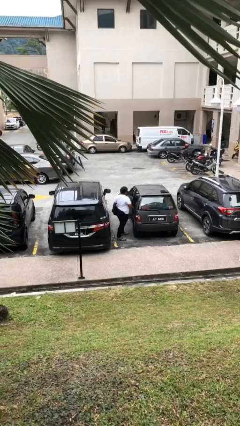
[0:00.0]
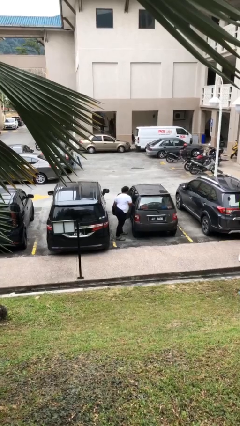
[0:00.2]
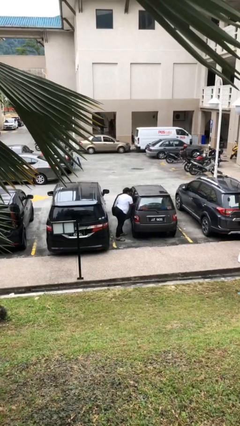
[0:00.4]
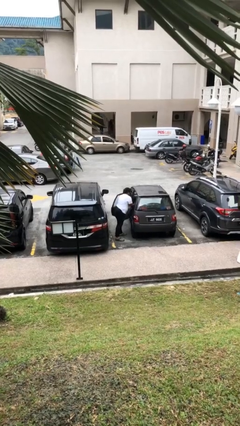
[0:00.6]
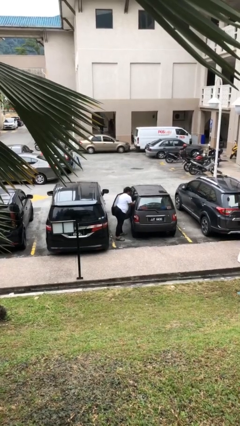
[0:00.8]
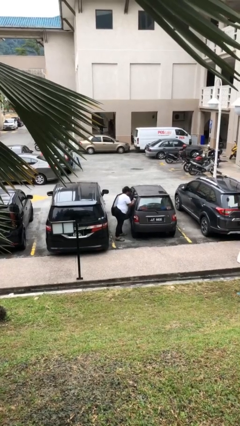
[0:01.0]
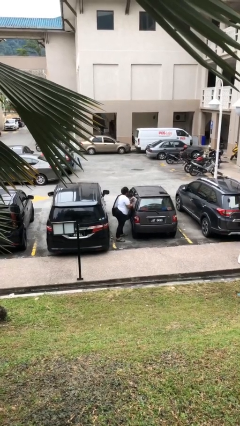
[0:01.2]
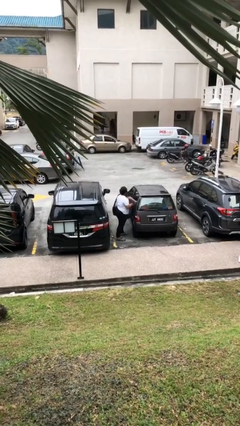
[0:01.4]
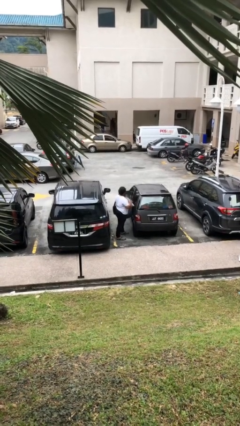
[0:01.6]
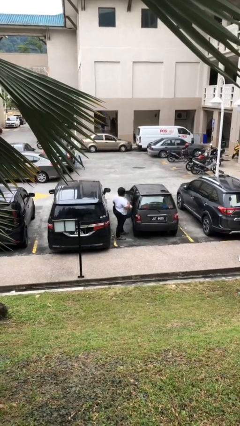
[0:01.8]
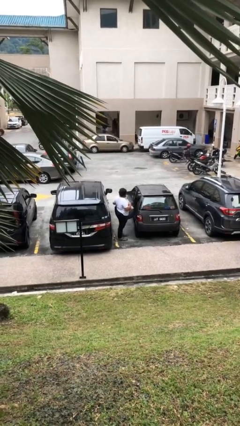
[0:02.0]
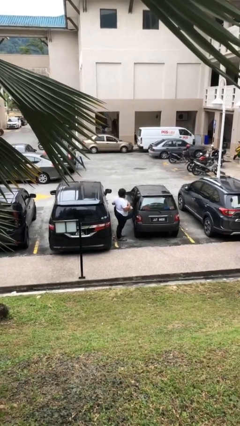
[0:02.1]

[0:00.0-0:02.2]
person unloads car

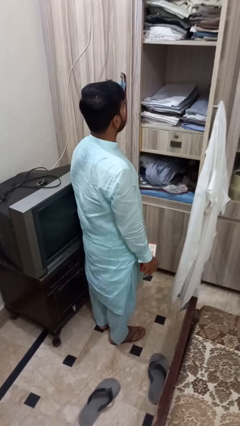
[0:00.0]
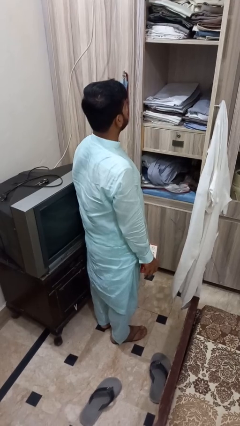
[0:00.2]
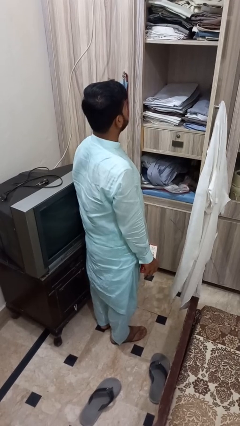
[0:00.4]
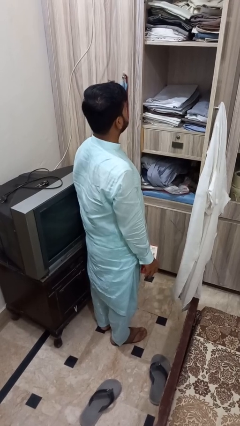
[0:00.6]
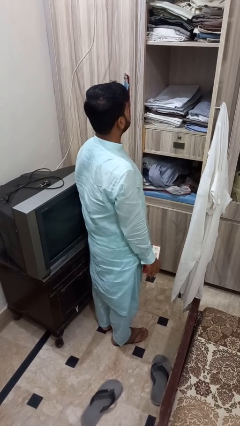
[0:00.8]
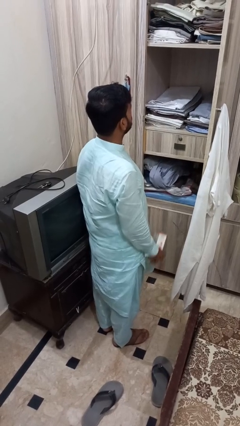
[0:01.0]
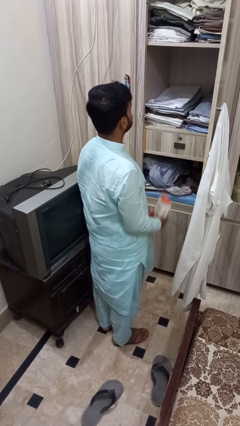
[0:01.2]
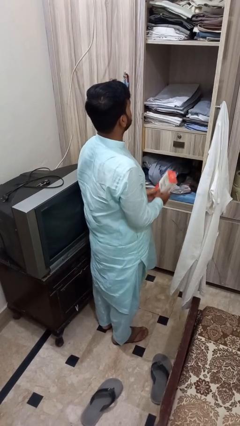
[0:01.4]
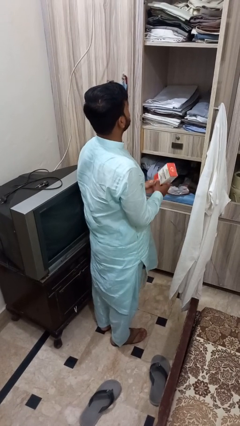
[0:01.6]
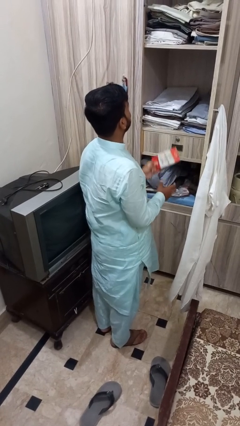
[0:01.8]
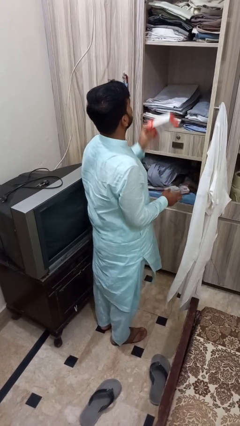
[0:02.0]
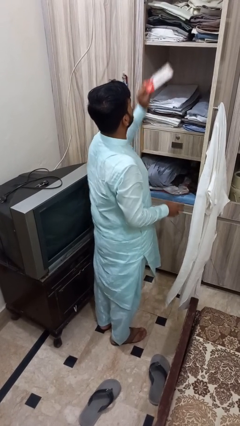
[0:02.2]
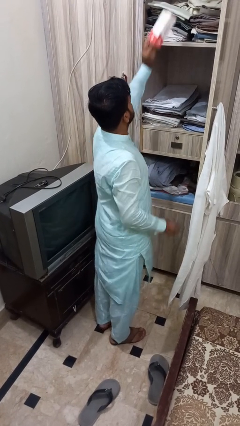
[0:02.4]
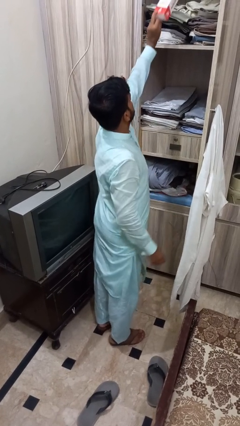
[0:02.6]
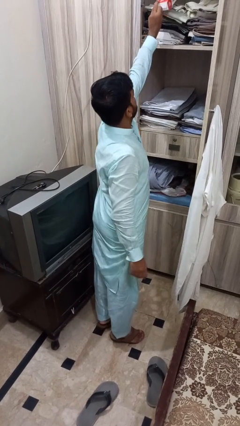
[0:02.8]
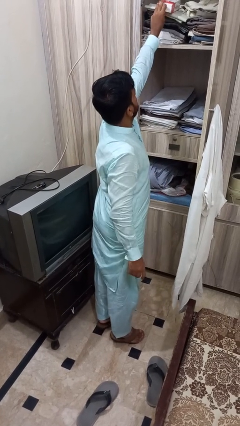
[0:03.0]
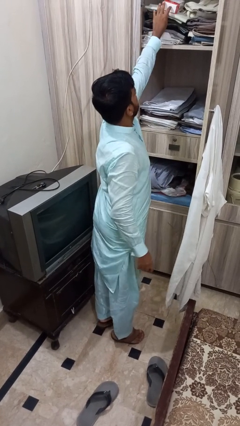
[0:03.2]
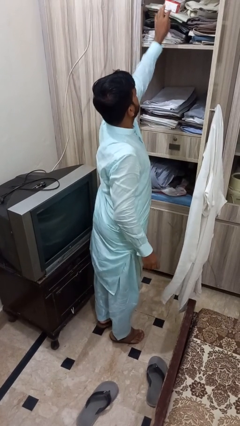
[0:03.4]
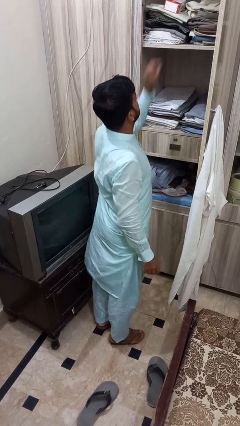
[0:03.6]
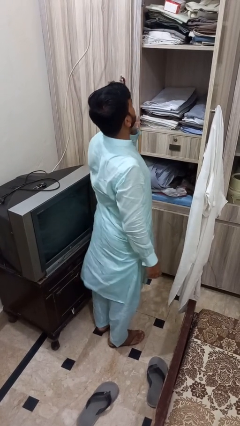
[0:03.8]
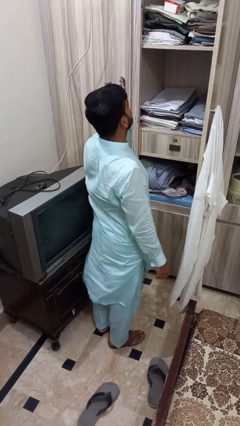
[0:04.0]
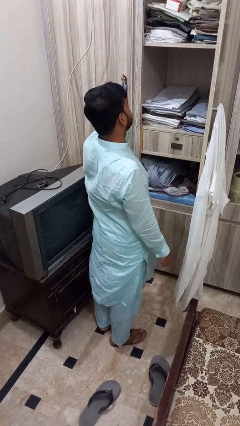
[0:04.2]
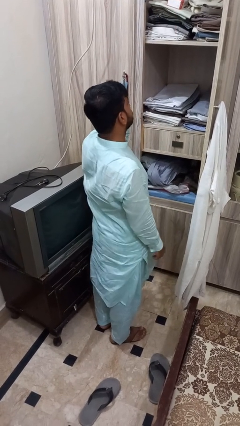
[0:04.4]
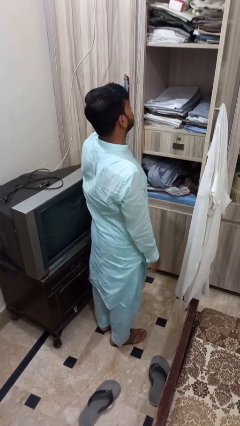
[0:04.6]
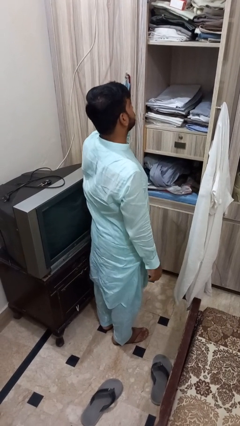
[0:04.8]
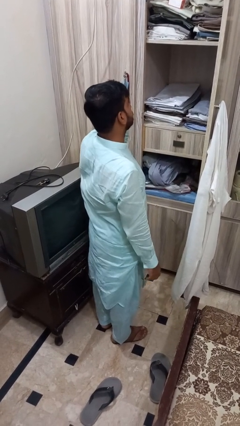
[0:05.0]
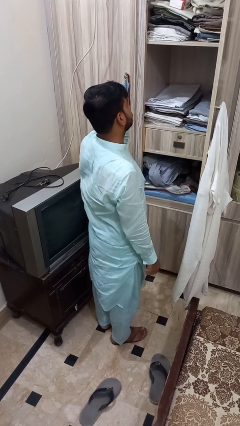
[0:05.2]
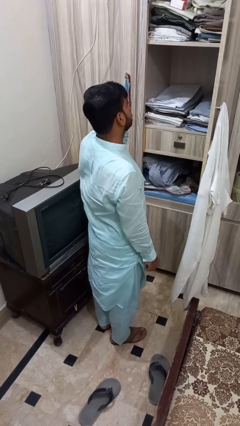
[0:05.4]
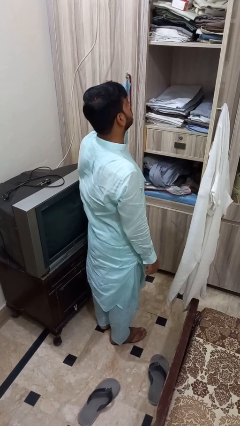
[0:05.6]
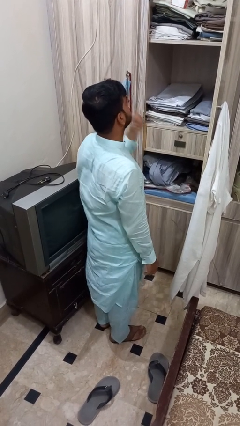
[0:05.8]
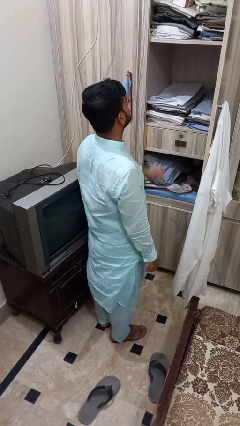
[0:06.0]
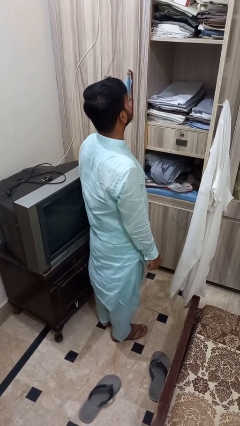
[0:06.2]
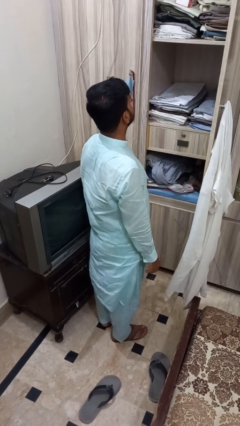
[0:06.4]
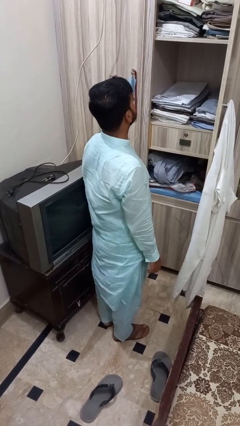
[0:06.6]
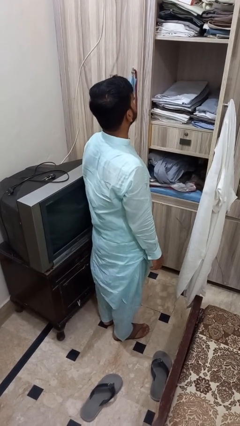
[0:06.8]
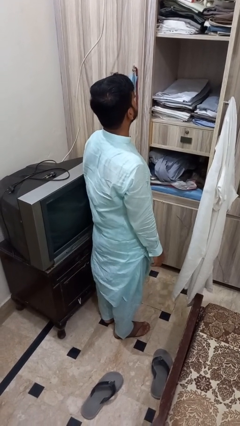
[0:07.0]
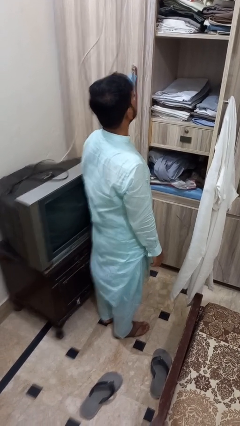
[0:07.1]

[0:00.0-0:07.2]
person puts down object on shelf

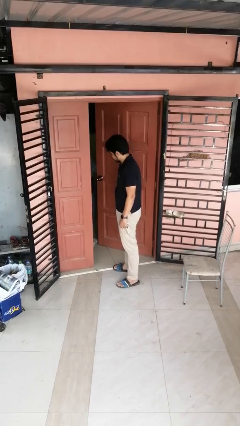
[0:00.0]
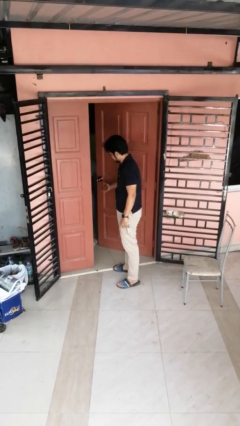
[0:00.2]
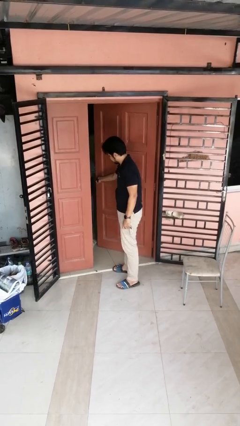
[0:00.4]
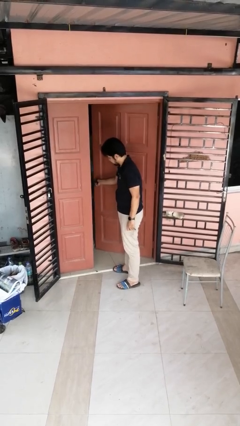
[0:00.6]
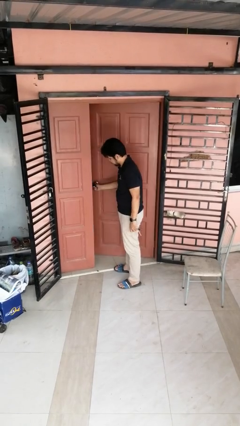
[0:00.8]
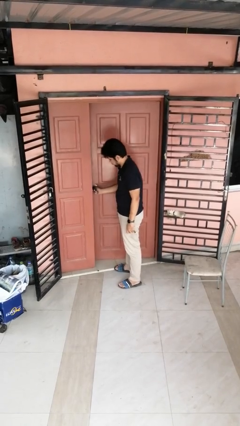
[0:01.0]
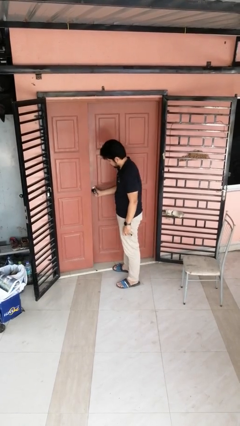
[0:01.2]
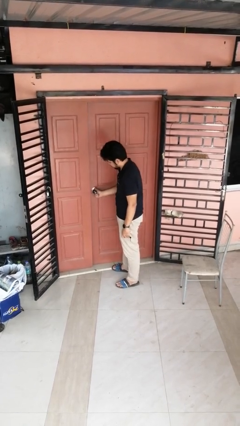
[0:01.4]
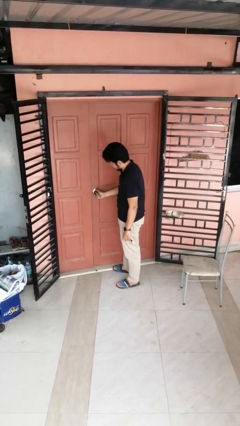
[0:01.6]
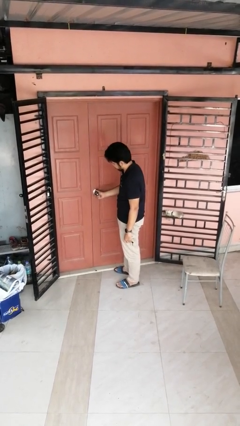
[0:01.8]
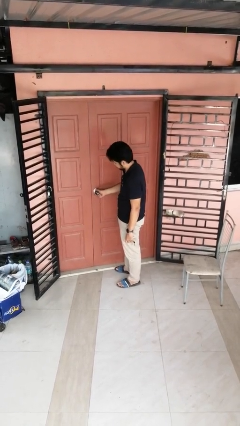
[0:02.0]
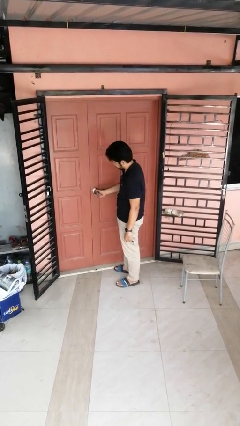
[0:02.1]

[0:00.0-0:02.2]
person closes facility door

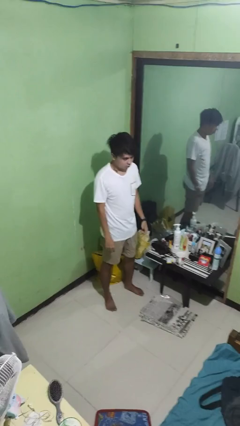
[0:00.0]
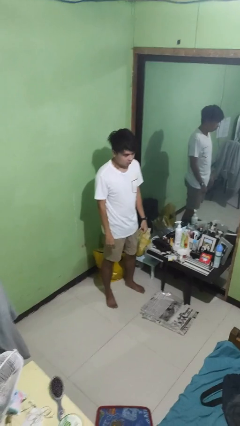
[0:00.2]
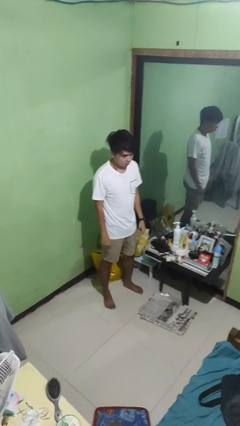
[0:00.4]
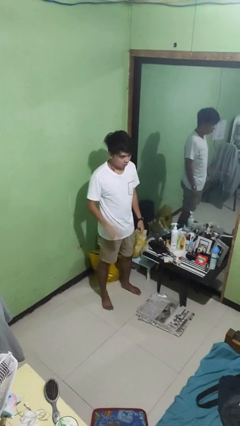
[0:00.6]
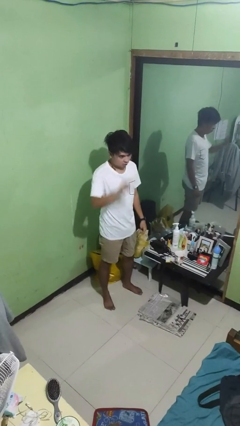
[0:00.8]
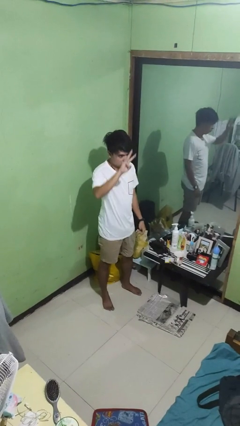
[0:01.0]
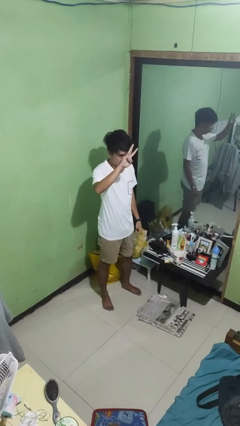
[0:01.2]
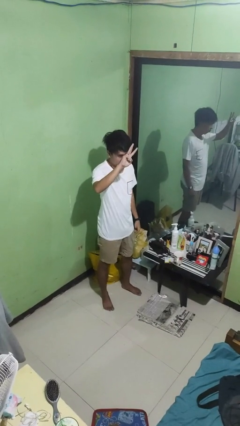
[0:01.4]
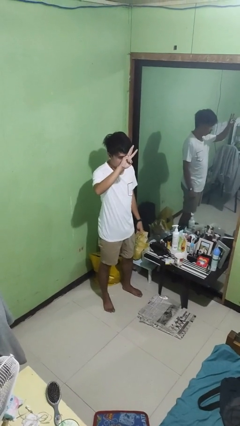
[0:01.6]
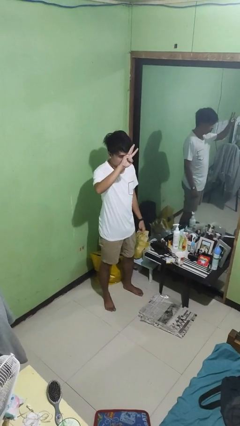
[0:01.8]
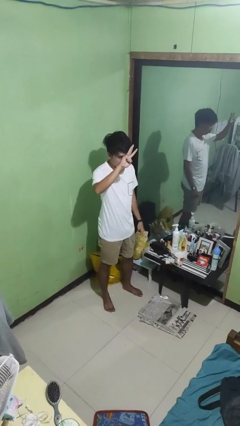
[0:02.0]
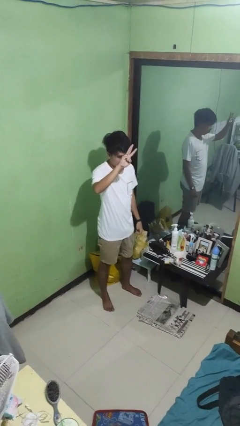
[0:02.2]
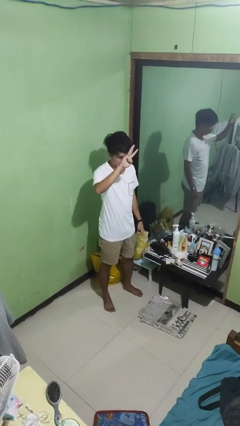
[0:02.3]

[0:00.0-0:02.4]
person gestures number three

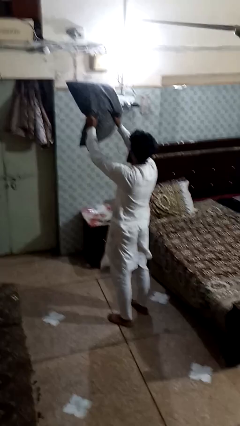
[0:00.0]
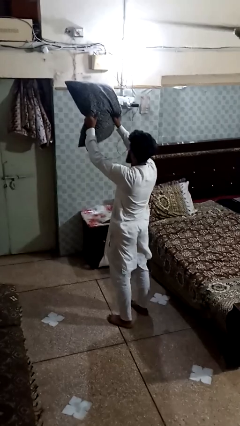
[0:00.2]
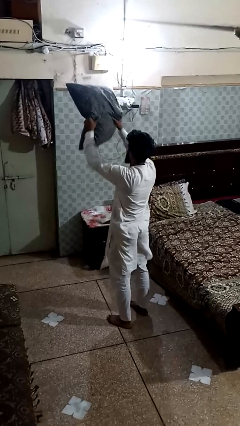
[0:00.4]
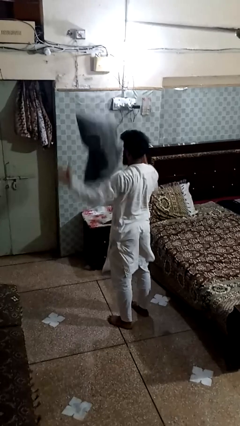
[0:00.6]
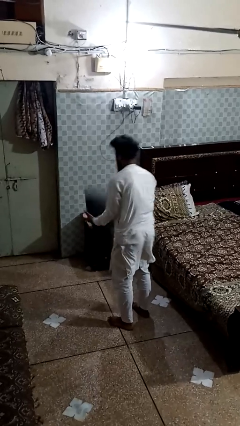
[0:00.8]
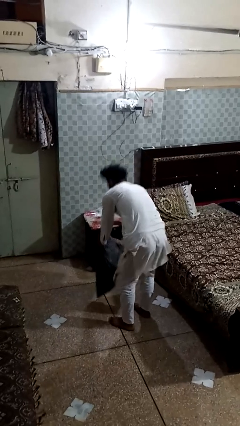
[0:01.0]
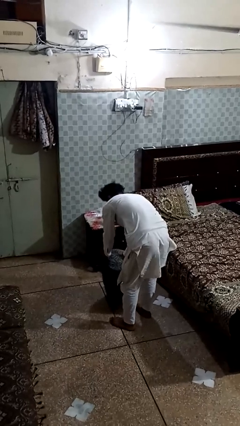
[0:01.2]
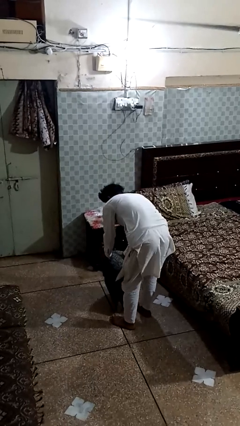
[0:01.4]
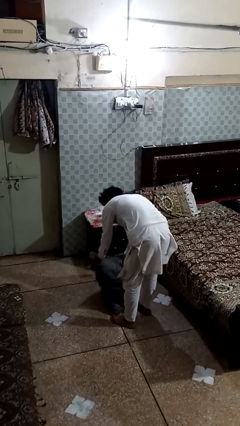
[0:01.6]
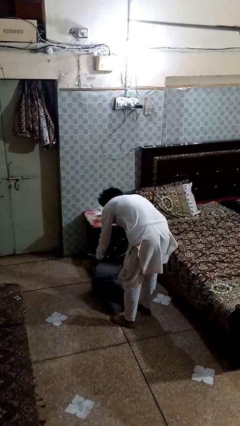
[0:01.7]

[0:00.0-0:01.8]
person drops object

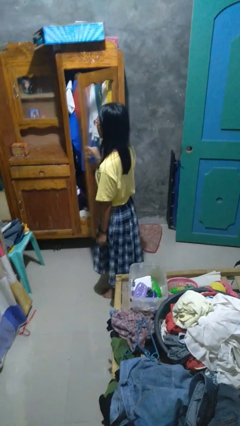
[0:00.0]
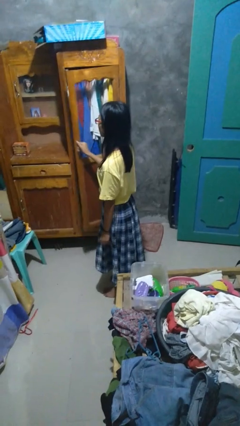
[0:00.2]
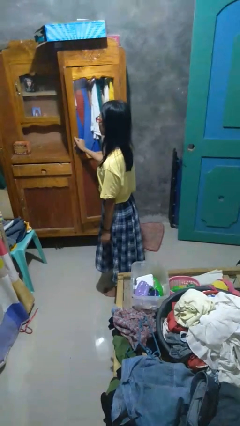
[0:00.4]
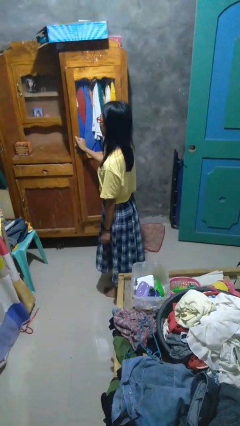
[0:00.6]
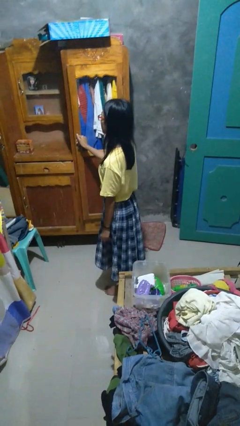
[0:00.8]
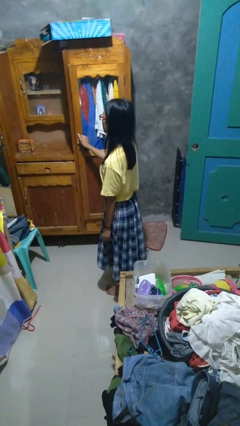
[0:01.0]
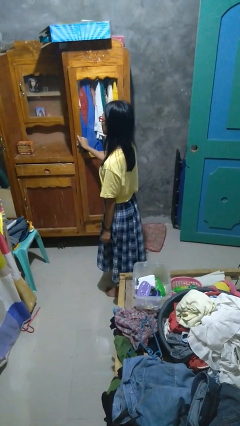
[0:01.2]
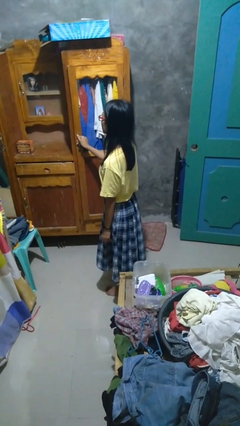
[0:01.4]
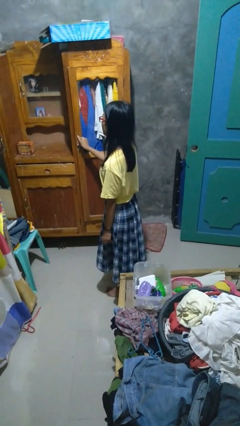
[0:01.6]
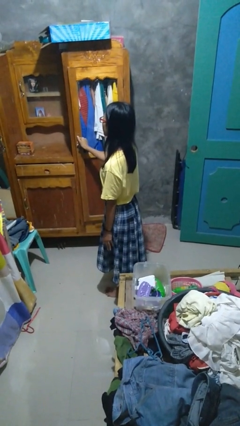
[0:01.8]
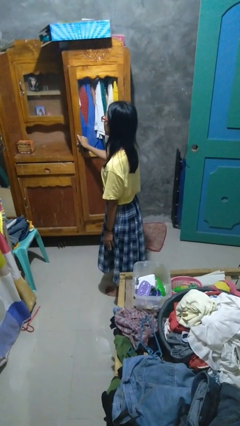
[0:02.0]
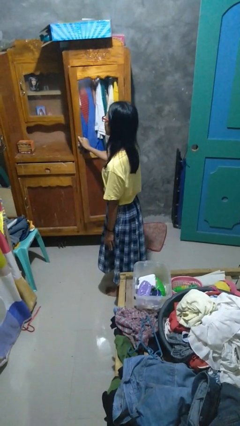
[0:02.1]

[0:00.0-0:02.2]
person closes closet door
